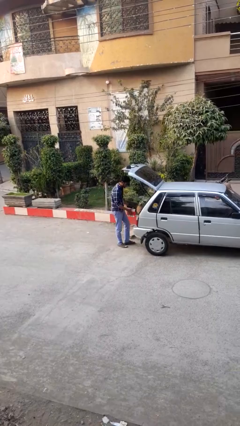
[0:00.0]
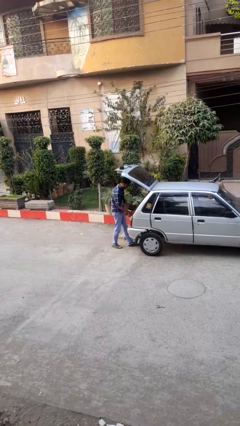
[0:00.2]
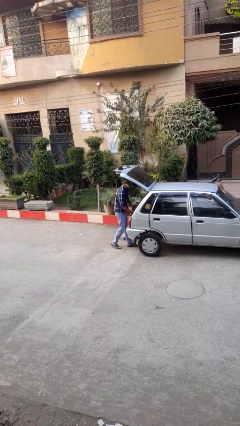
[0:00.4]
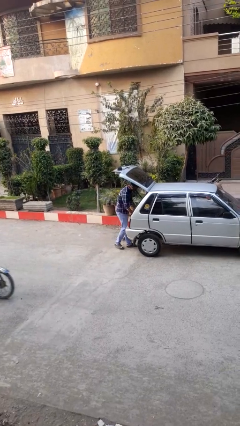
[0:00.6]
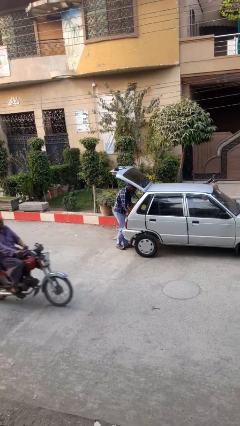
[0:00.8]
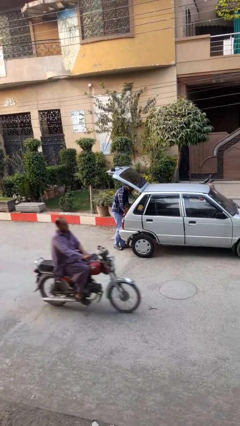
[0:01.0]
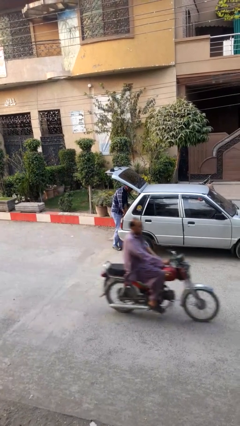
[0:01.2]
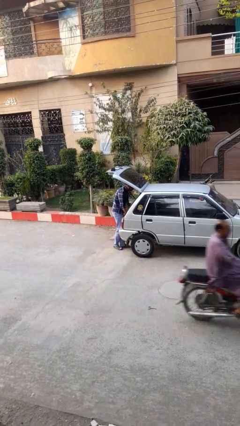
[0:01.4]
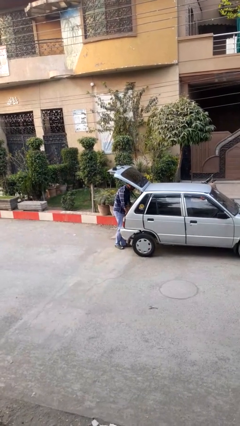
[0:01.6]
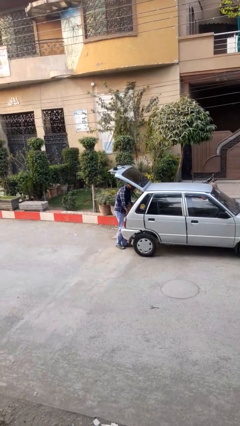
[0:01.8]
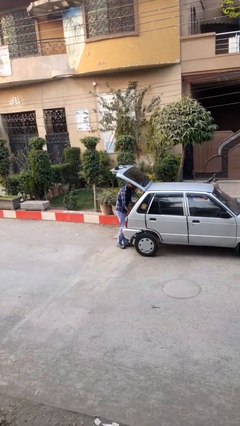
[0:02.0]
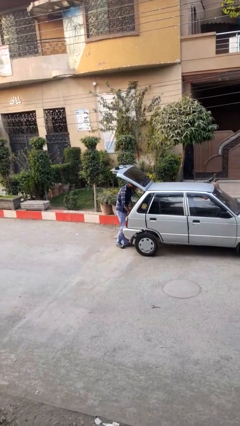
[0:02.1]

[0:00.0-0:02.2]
person loads car

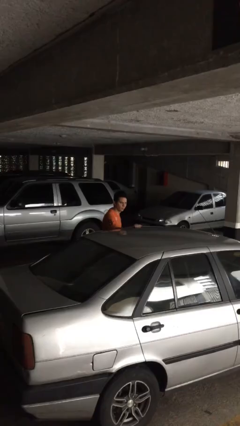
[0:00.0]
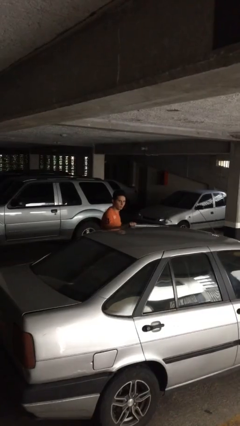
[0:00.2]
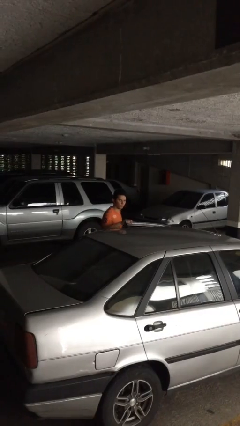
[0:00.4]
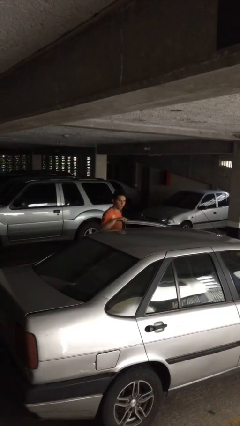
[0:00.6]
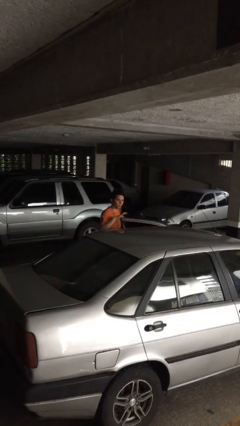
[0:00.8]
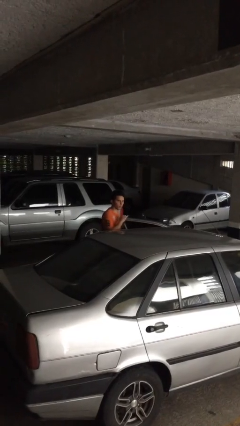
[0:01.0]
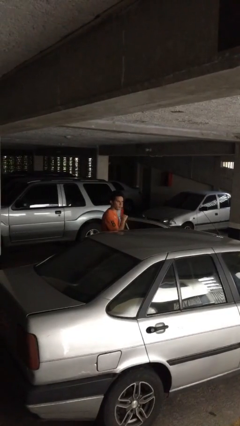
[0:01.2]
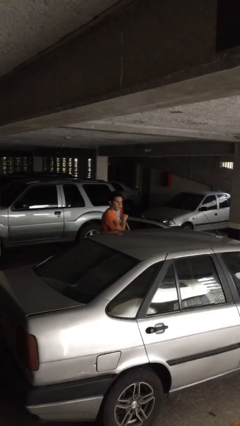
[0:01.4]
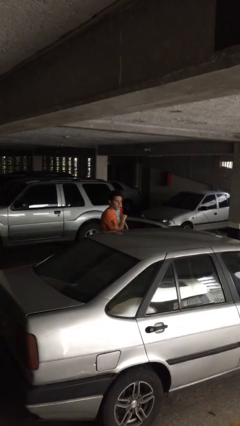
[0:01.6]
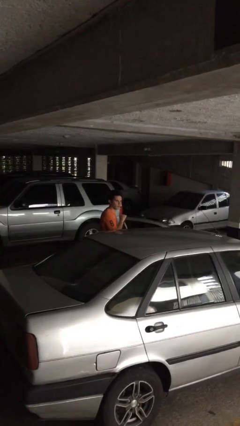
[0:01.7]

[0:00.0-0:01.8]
person opens car door

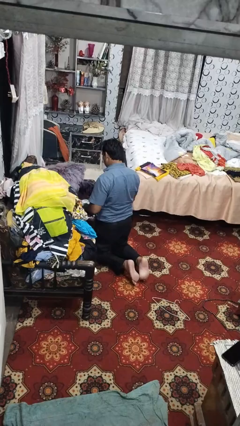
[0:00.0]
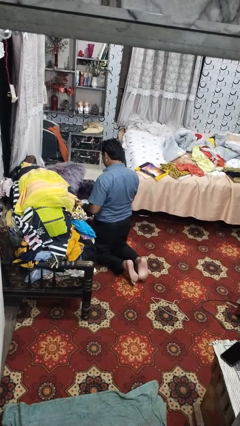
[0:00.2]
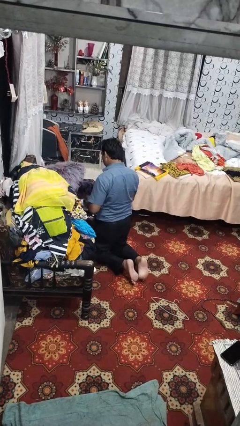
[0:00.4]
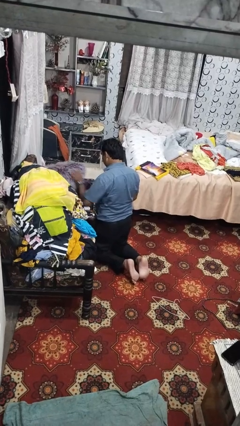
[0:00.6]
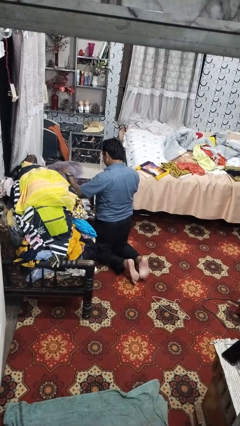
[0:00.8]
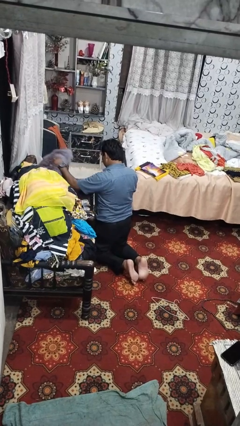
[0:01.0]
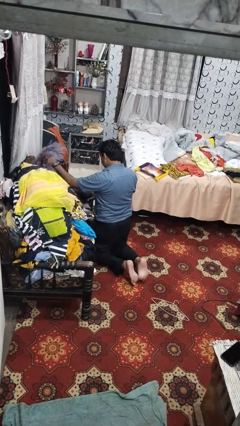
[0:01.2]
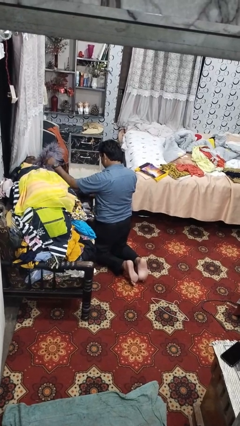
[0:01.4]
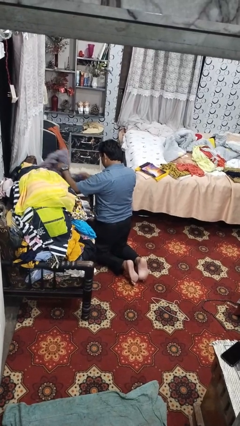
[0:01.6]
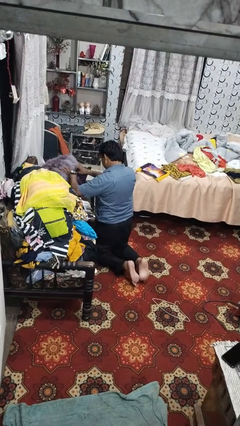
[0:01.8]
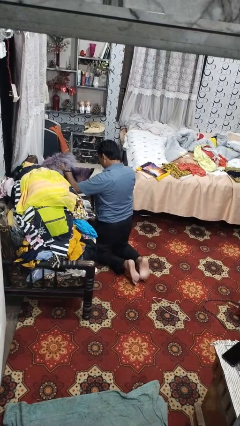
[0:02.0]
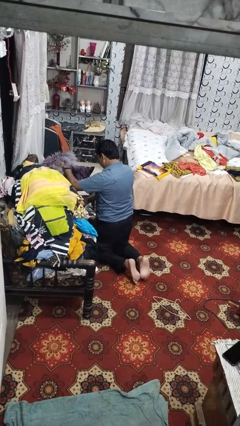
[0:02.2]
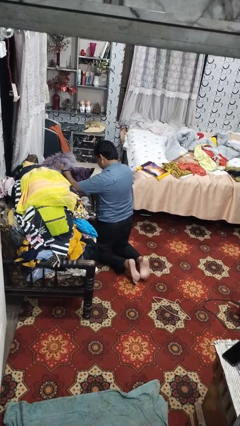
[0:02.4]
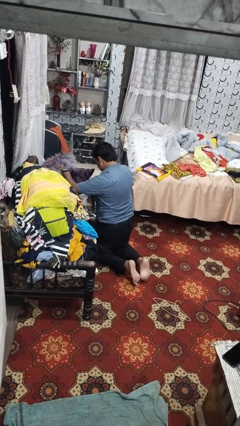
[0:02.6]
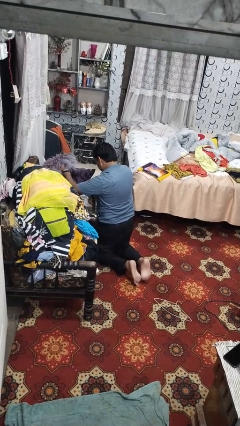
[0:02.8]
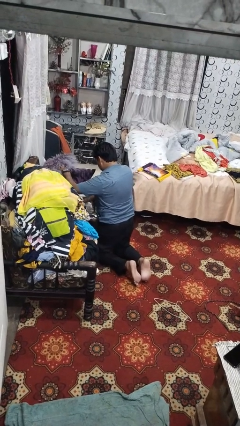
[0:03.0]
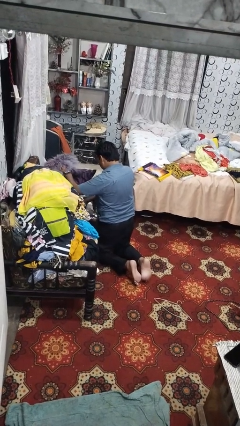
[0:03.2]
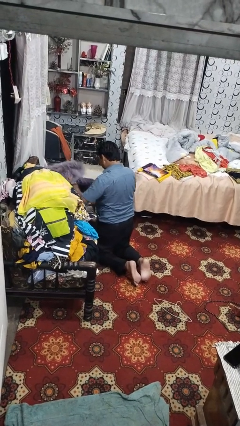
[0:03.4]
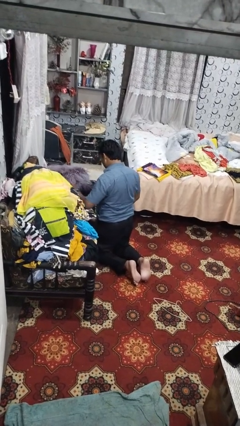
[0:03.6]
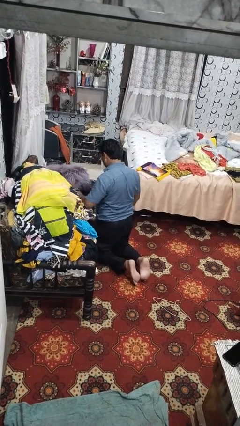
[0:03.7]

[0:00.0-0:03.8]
person searches in couch

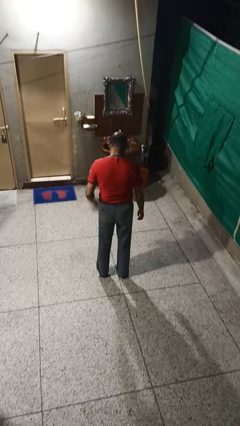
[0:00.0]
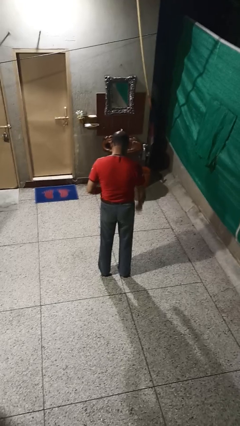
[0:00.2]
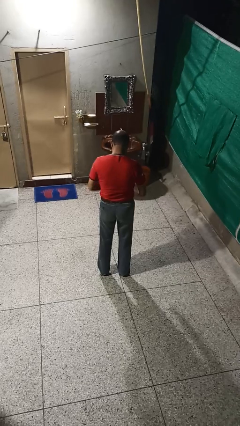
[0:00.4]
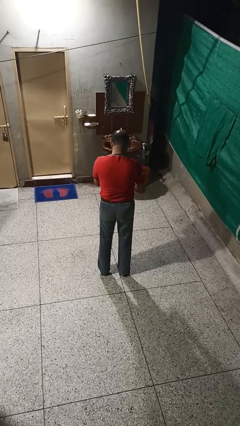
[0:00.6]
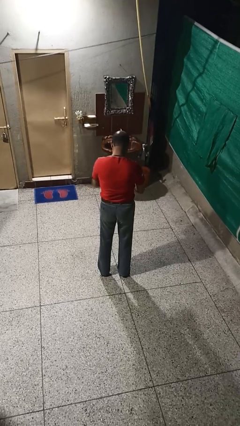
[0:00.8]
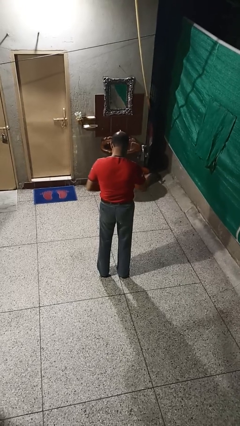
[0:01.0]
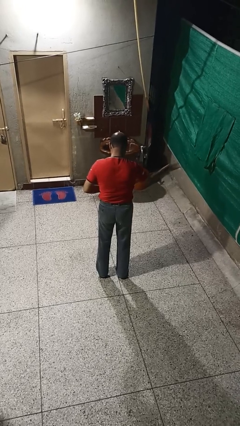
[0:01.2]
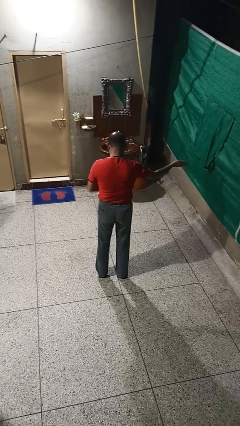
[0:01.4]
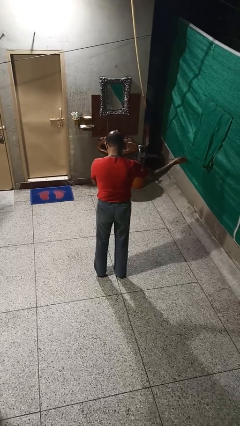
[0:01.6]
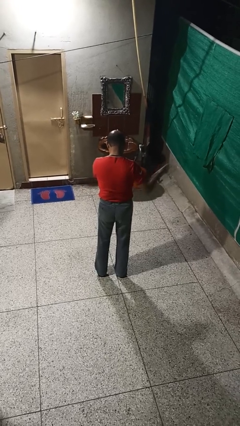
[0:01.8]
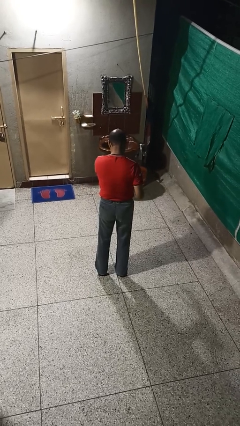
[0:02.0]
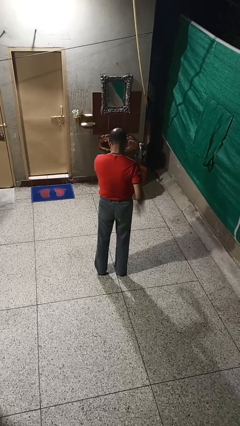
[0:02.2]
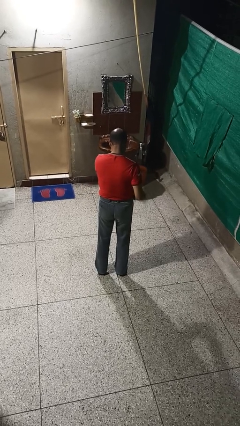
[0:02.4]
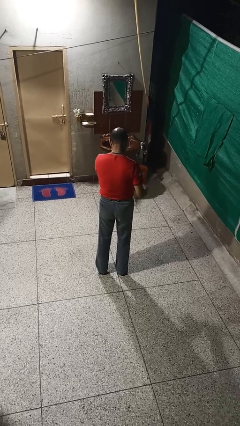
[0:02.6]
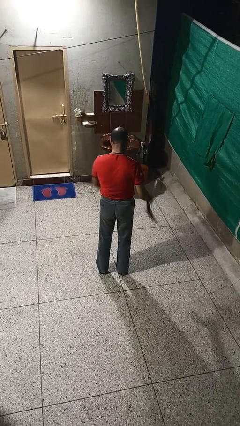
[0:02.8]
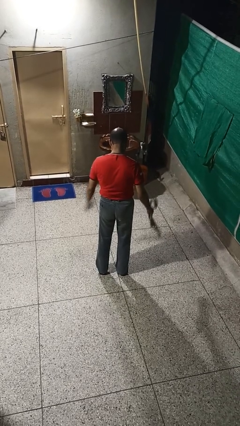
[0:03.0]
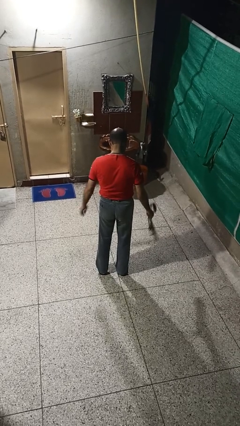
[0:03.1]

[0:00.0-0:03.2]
person takes off belt

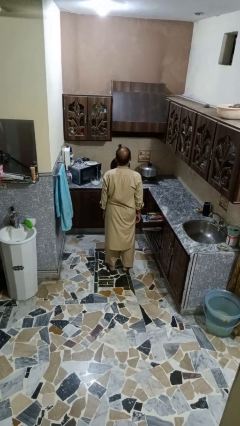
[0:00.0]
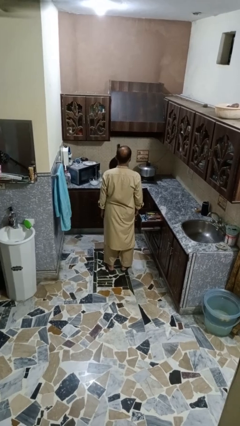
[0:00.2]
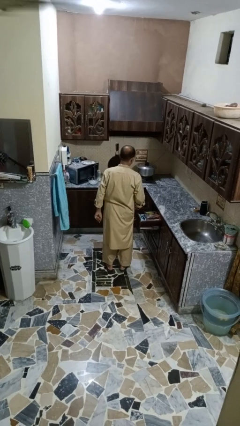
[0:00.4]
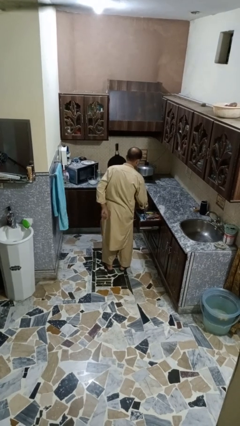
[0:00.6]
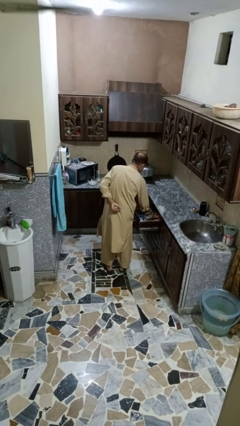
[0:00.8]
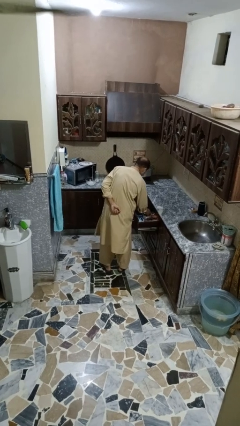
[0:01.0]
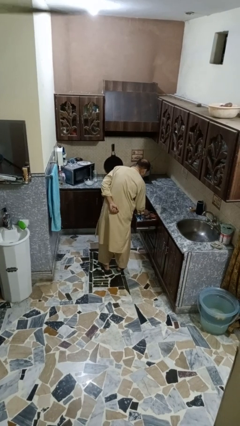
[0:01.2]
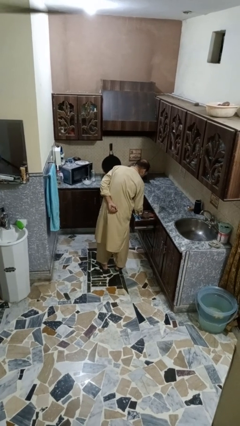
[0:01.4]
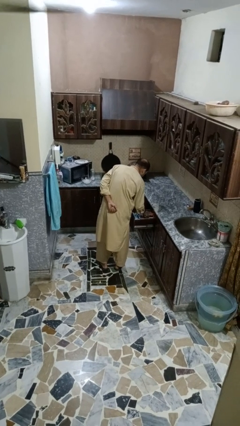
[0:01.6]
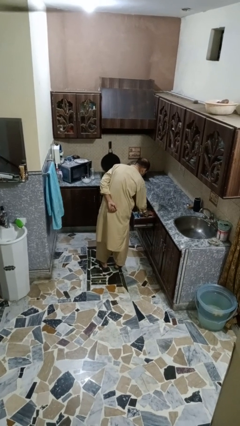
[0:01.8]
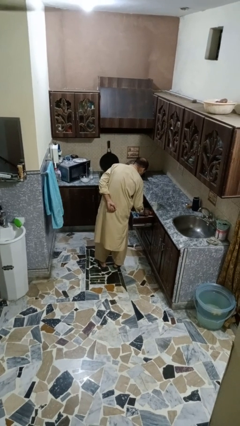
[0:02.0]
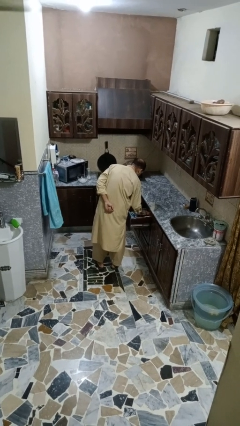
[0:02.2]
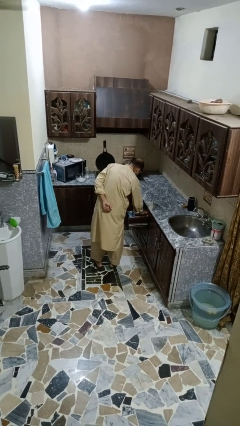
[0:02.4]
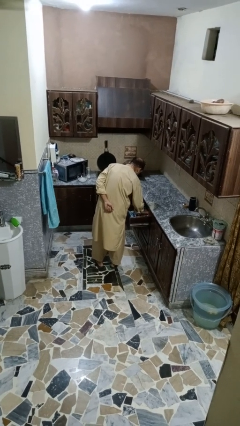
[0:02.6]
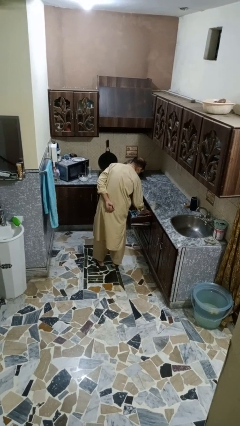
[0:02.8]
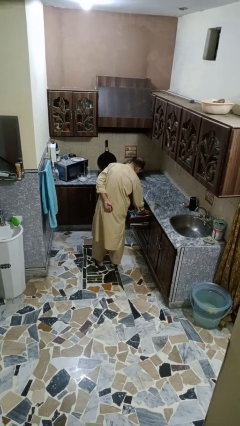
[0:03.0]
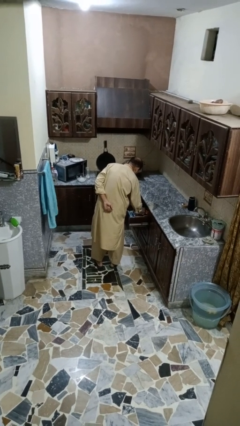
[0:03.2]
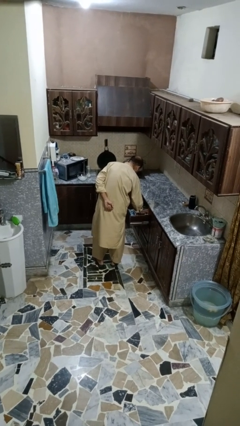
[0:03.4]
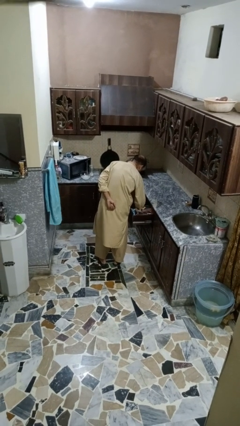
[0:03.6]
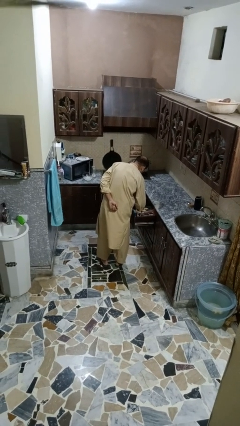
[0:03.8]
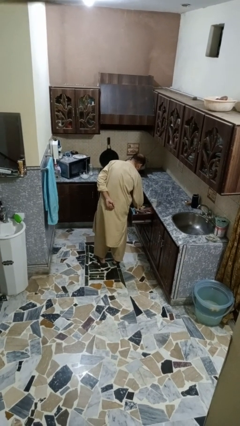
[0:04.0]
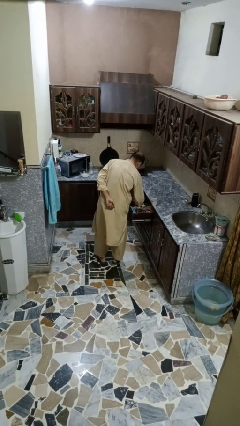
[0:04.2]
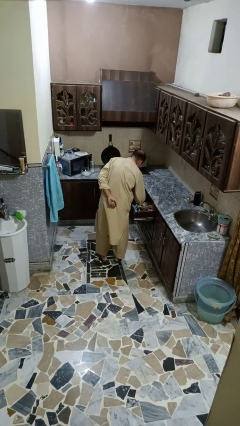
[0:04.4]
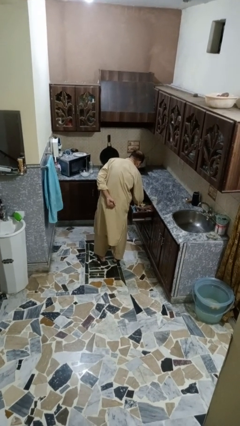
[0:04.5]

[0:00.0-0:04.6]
person searches in kitchen drawer

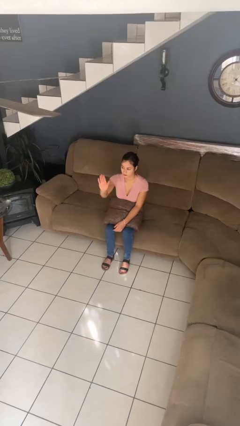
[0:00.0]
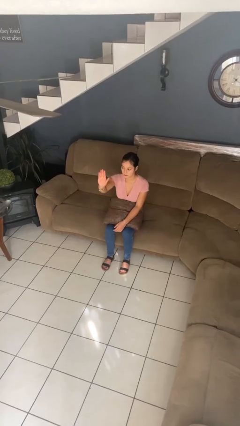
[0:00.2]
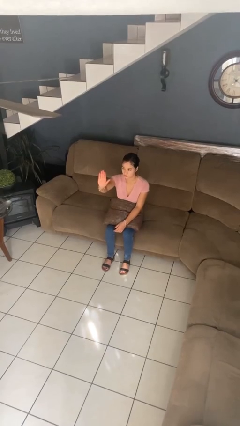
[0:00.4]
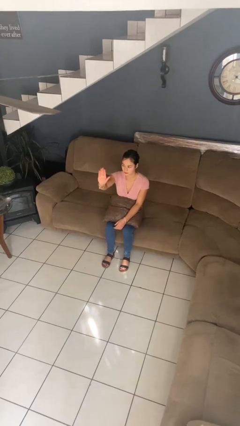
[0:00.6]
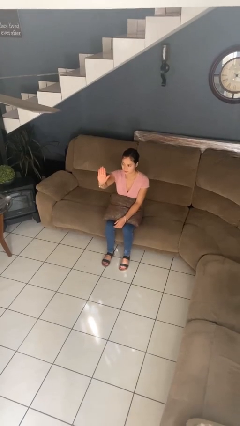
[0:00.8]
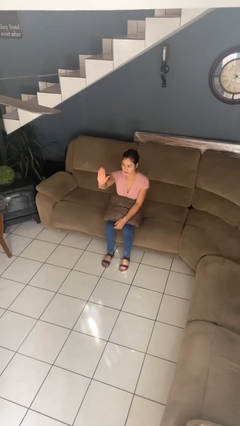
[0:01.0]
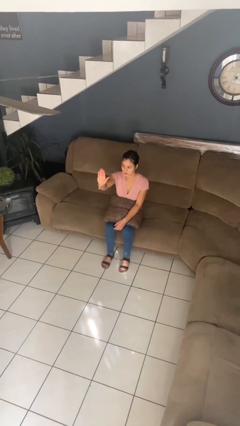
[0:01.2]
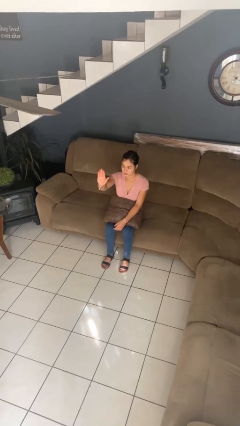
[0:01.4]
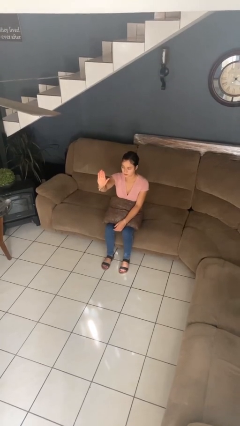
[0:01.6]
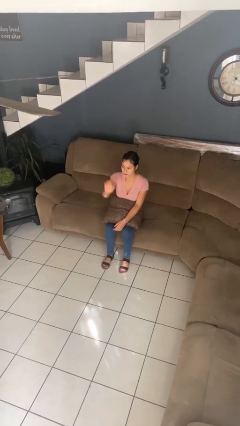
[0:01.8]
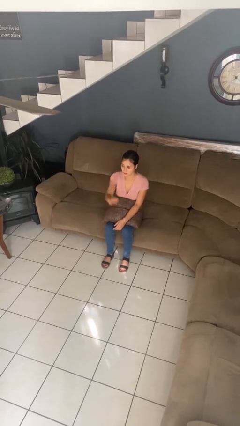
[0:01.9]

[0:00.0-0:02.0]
person gestures stop
